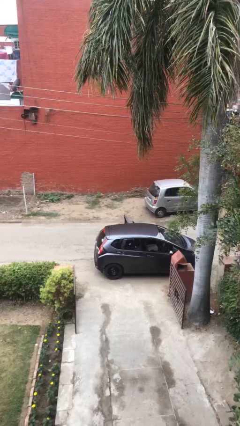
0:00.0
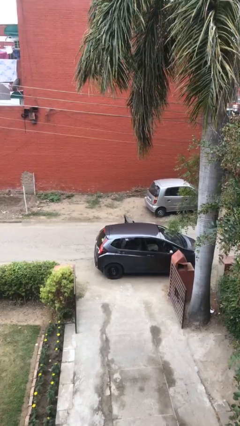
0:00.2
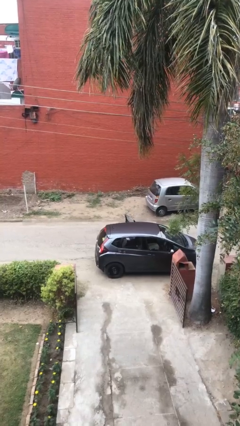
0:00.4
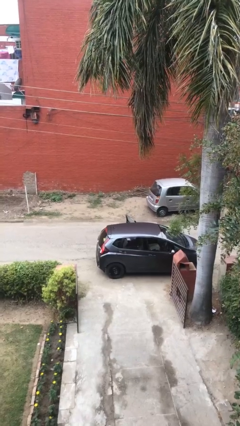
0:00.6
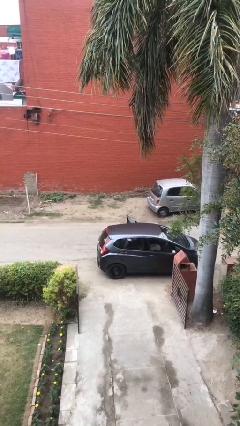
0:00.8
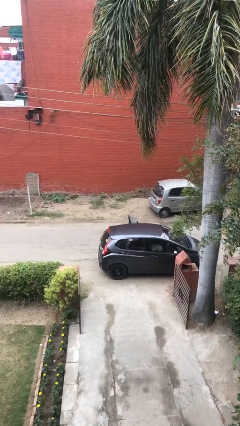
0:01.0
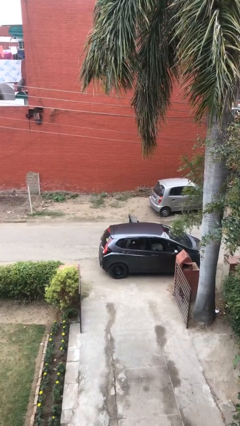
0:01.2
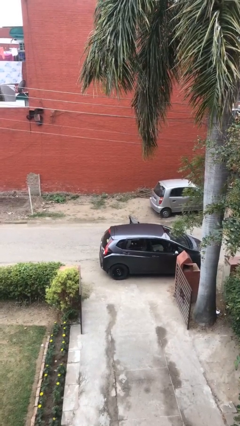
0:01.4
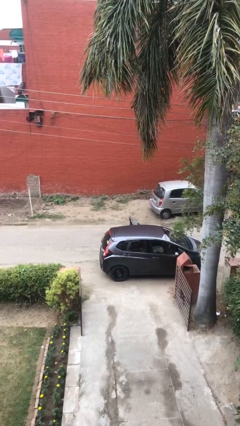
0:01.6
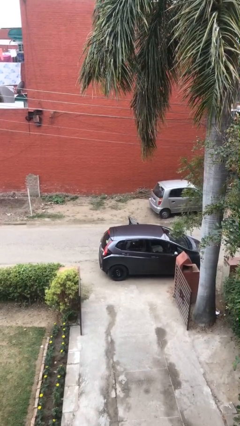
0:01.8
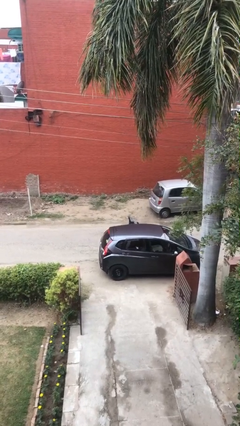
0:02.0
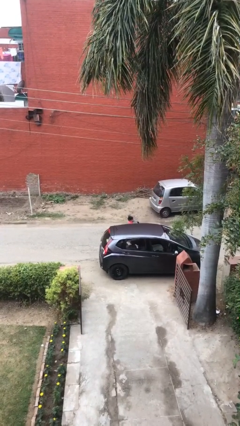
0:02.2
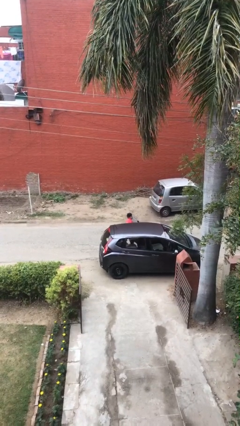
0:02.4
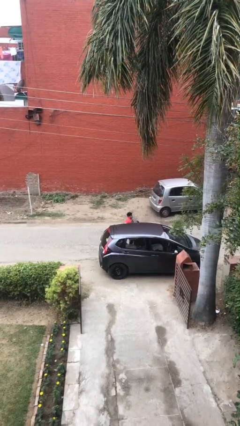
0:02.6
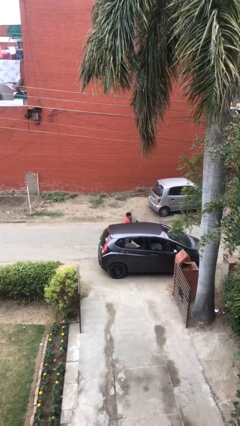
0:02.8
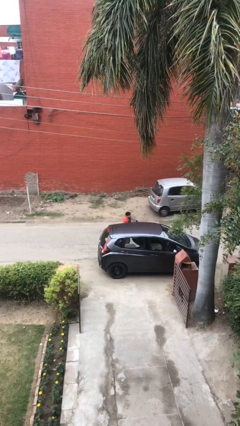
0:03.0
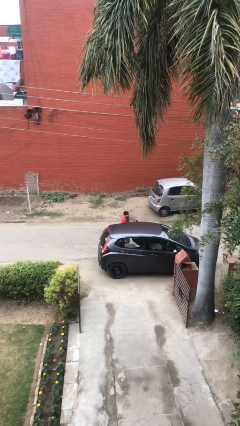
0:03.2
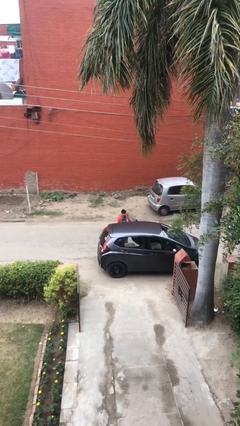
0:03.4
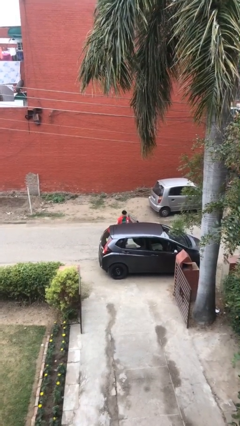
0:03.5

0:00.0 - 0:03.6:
person exits car

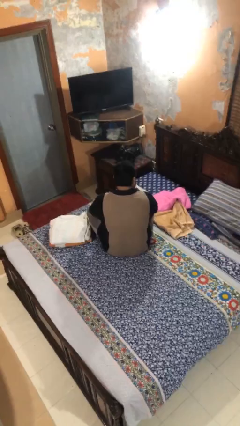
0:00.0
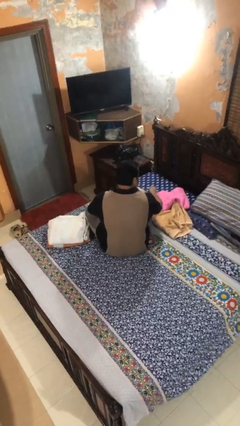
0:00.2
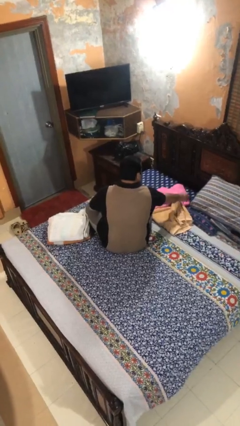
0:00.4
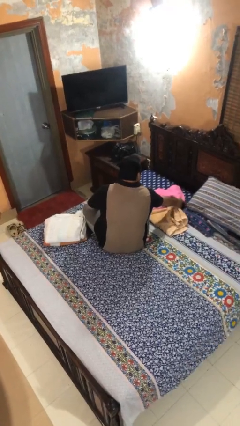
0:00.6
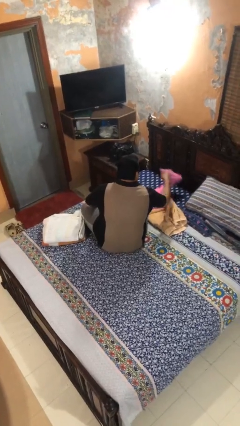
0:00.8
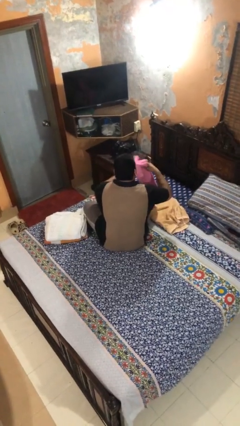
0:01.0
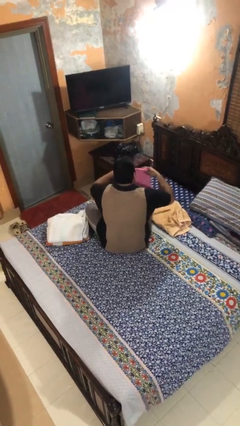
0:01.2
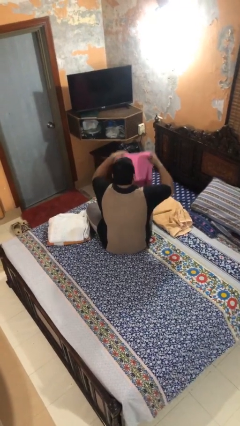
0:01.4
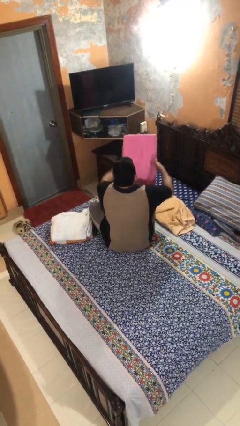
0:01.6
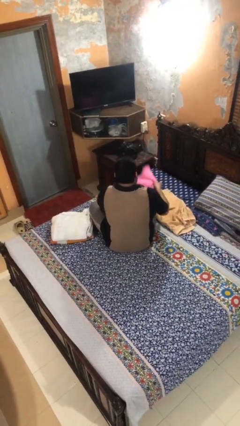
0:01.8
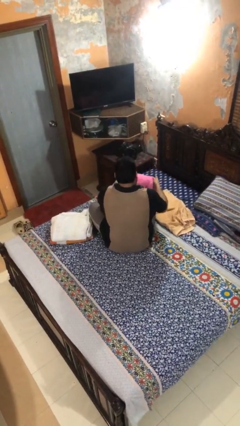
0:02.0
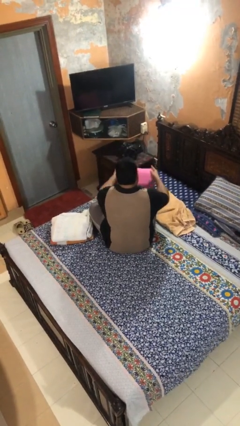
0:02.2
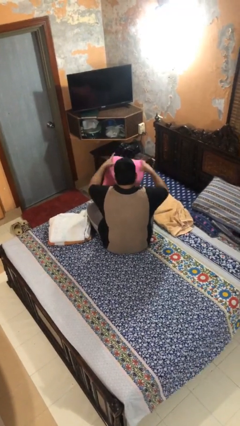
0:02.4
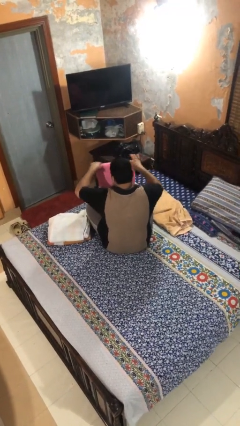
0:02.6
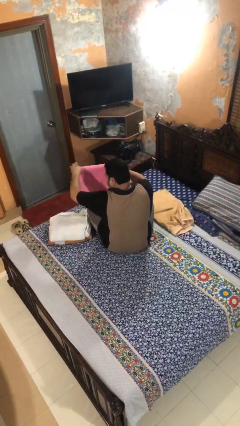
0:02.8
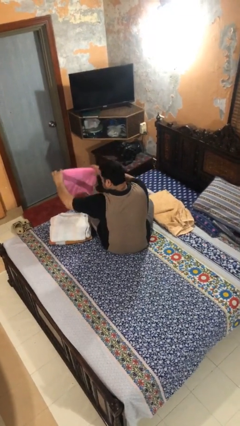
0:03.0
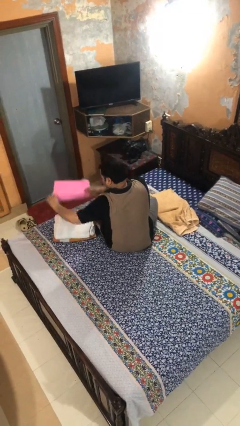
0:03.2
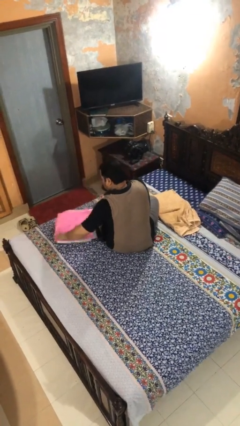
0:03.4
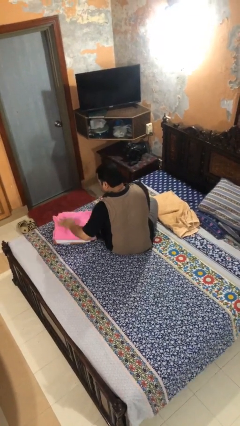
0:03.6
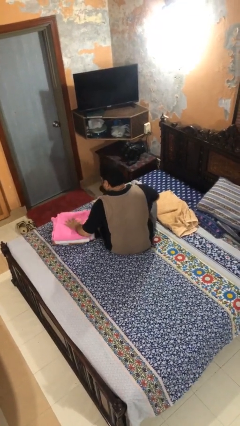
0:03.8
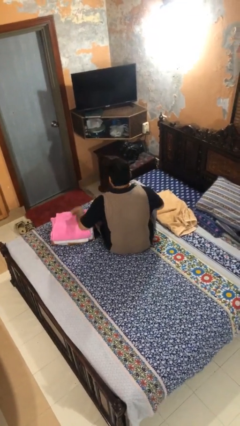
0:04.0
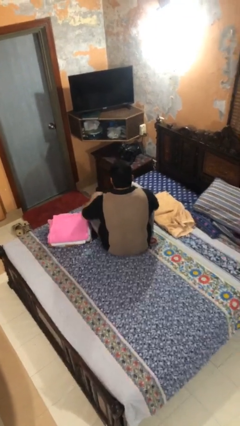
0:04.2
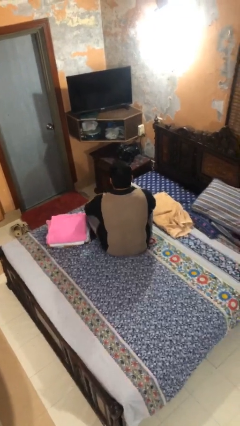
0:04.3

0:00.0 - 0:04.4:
person folds towel

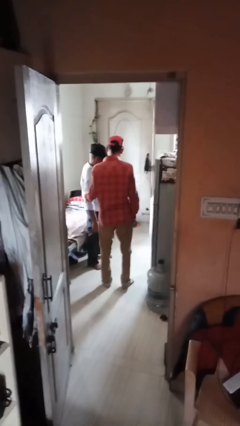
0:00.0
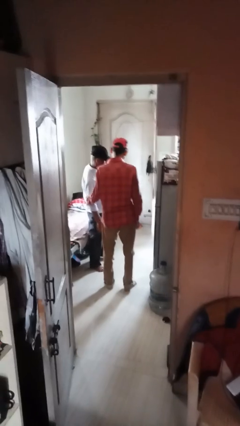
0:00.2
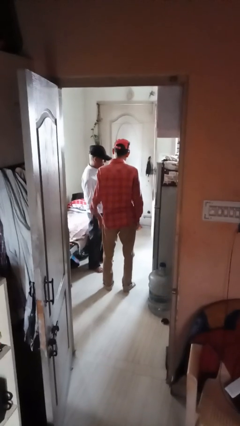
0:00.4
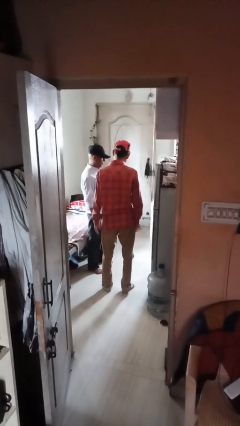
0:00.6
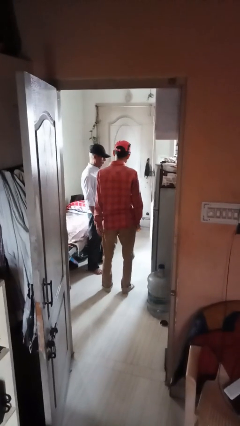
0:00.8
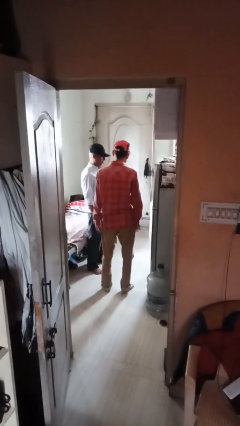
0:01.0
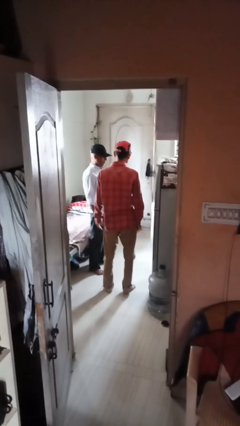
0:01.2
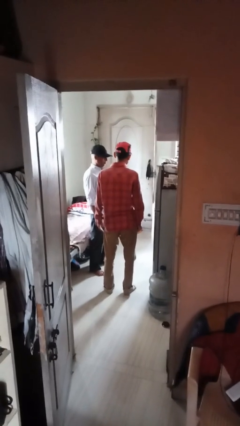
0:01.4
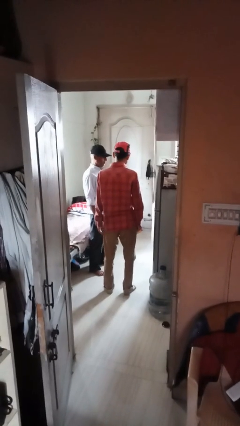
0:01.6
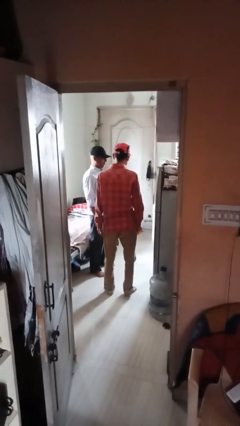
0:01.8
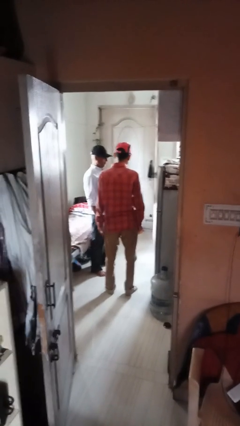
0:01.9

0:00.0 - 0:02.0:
person grabs person by bicep

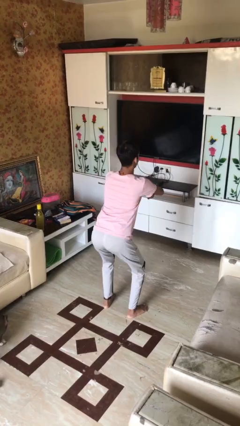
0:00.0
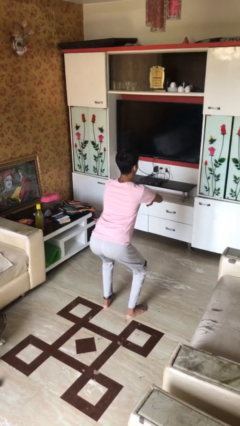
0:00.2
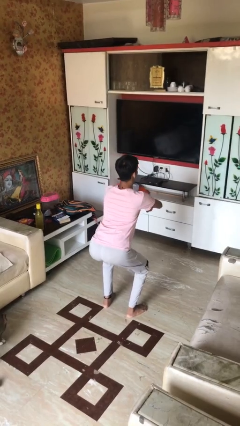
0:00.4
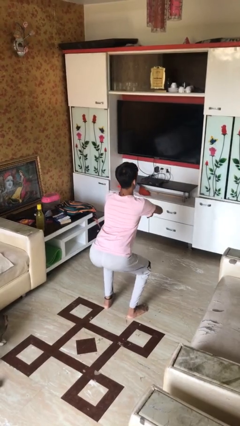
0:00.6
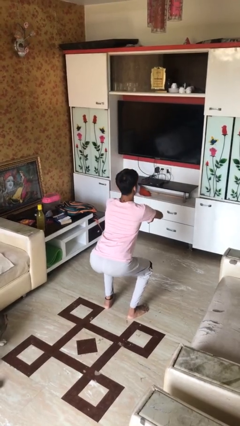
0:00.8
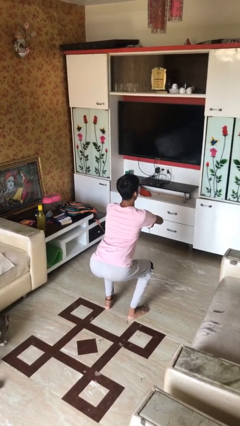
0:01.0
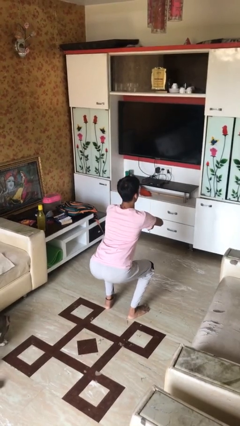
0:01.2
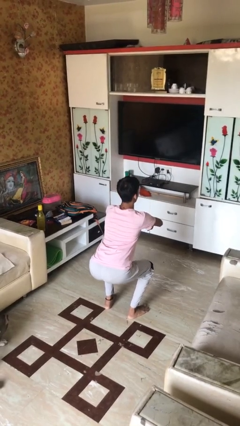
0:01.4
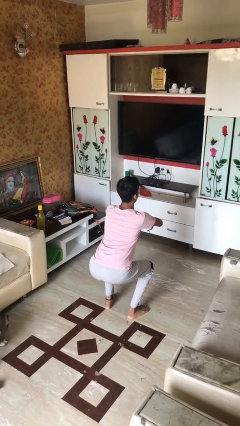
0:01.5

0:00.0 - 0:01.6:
person squats

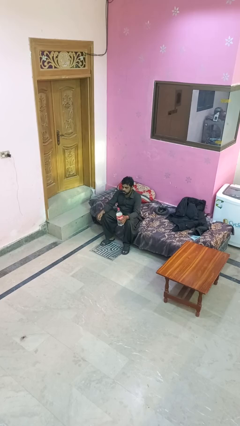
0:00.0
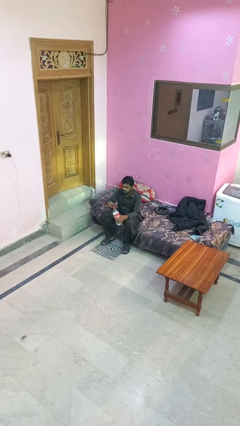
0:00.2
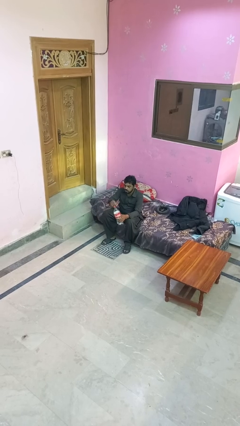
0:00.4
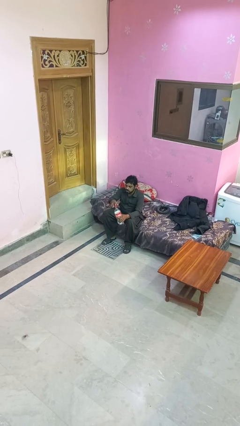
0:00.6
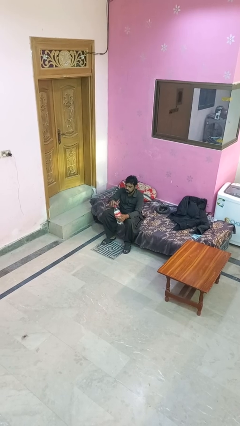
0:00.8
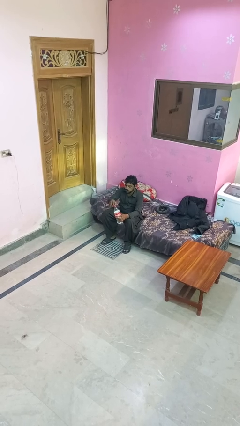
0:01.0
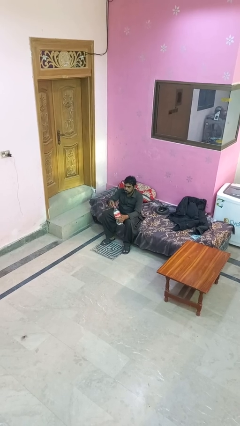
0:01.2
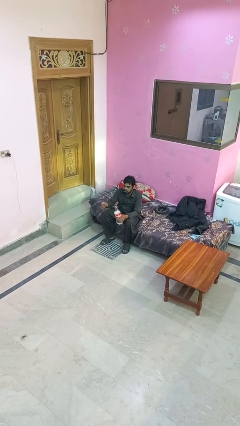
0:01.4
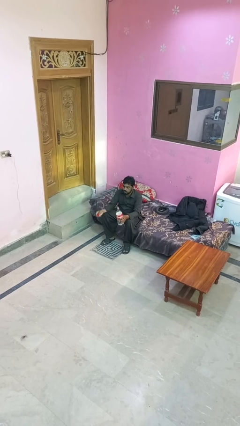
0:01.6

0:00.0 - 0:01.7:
person unscrews lid from bottle

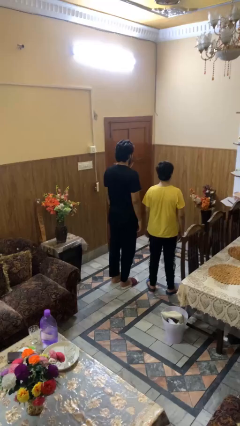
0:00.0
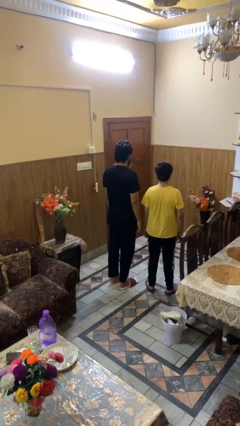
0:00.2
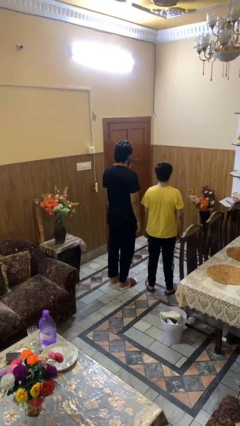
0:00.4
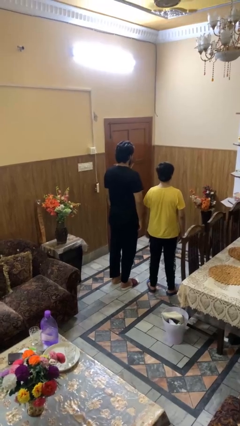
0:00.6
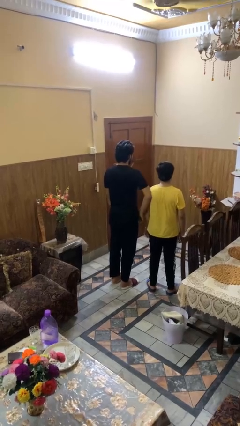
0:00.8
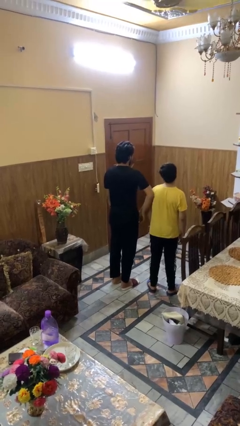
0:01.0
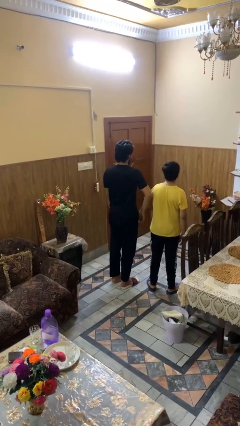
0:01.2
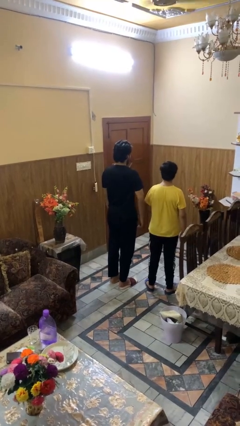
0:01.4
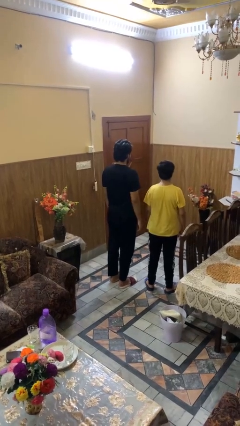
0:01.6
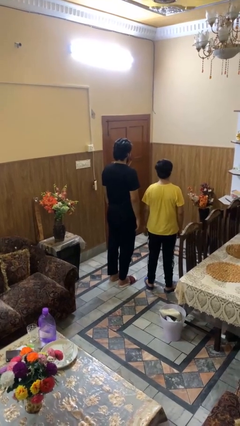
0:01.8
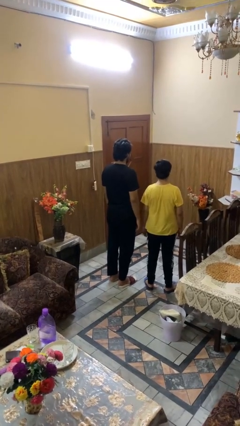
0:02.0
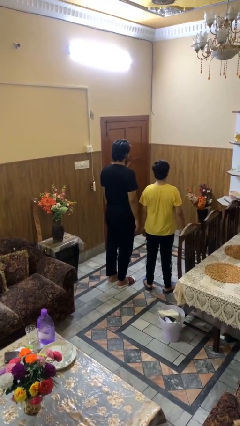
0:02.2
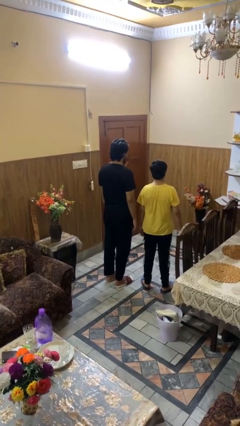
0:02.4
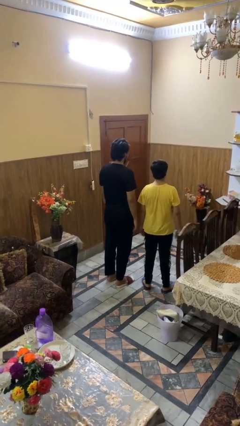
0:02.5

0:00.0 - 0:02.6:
person nudges person with elbow

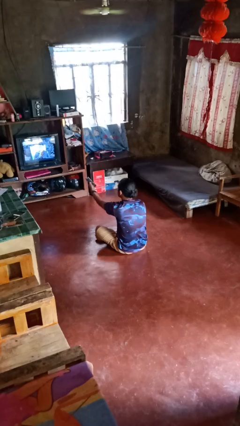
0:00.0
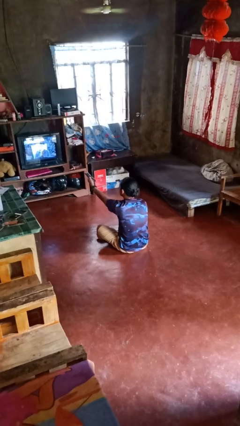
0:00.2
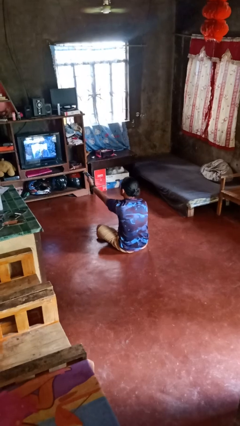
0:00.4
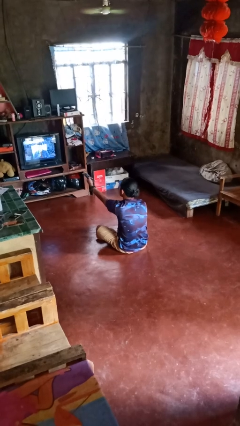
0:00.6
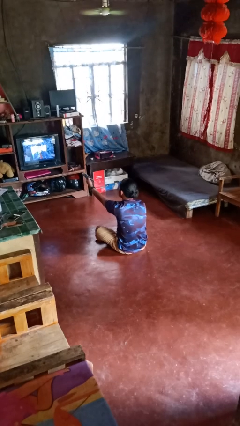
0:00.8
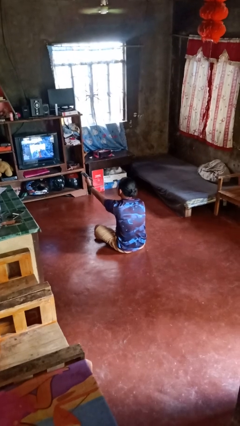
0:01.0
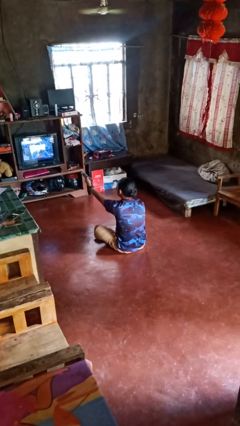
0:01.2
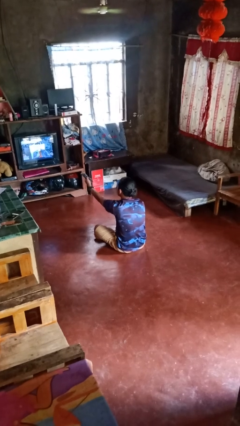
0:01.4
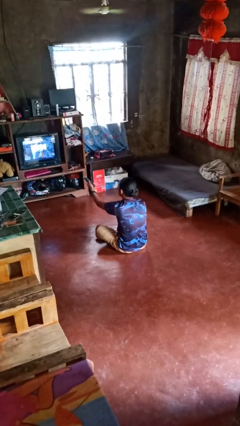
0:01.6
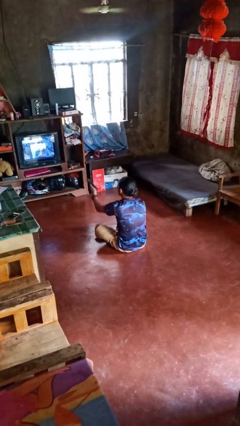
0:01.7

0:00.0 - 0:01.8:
person uses television remote
